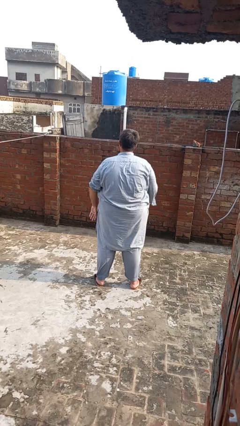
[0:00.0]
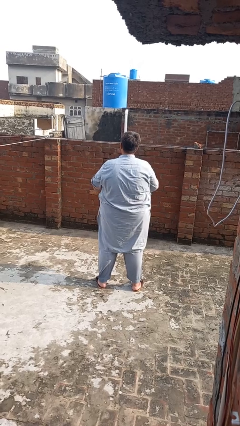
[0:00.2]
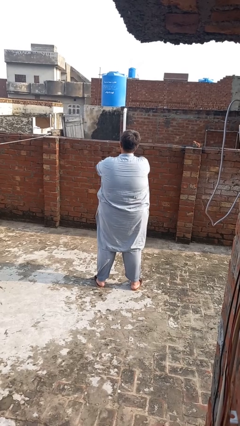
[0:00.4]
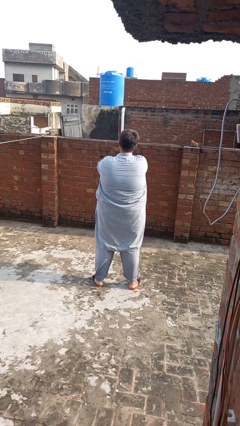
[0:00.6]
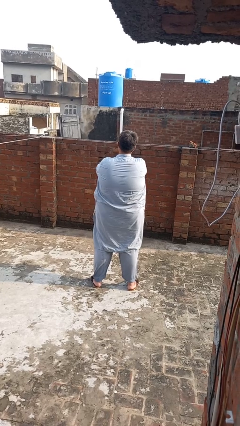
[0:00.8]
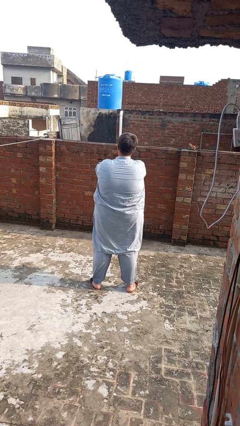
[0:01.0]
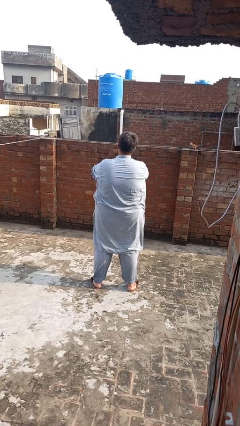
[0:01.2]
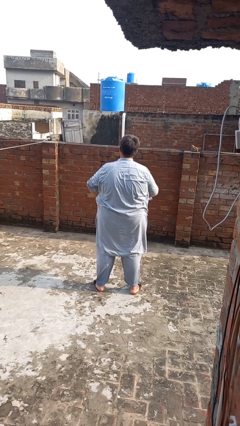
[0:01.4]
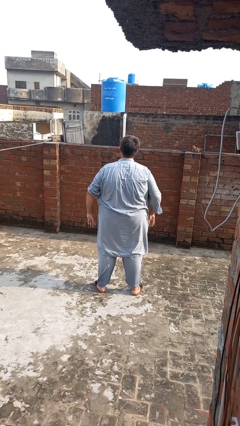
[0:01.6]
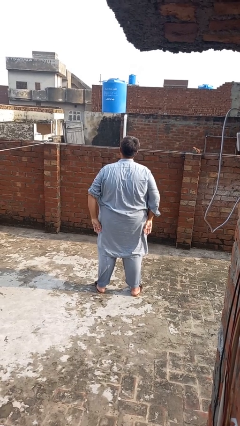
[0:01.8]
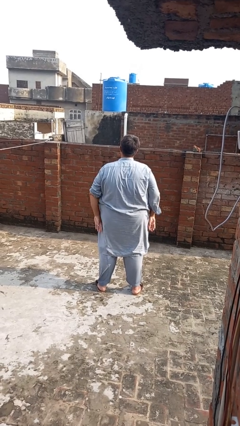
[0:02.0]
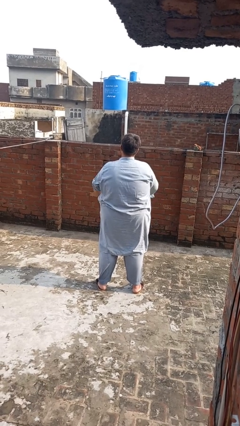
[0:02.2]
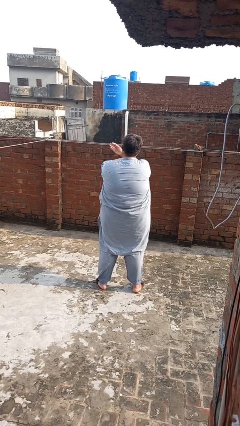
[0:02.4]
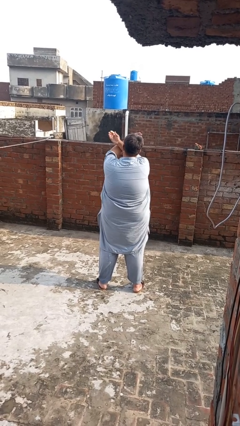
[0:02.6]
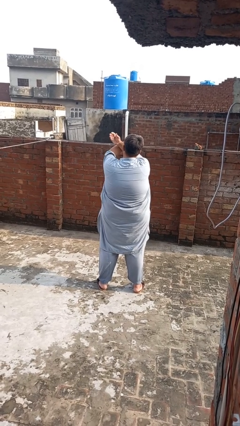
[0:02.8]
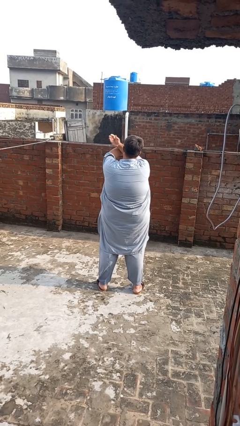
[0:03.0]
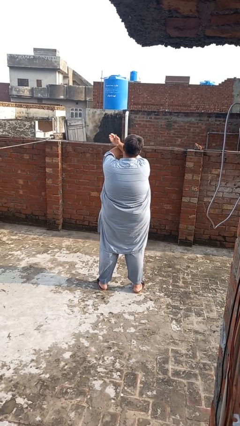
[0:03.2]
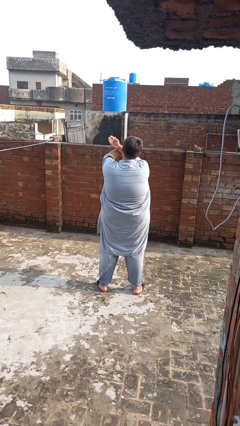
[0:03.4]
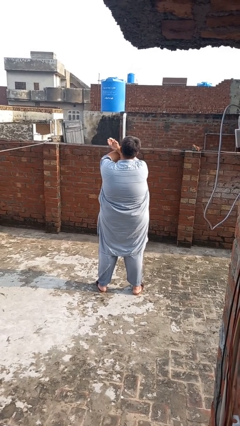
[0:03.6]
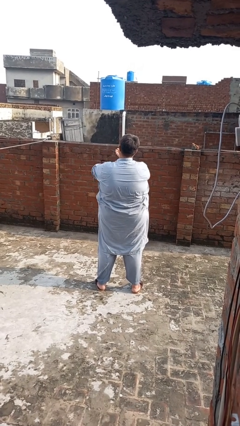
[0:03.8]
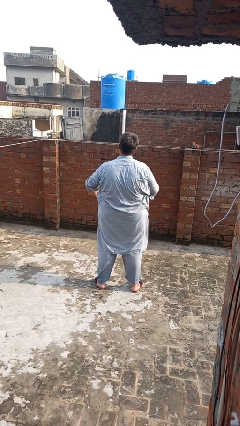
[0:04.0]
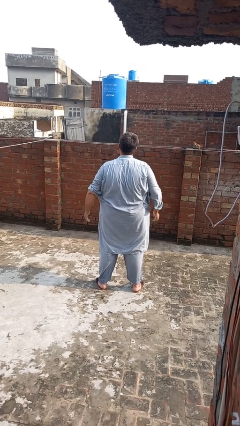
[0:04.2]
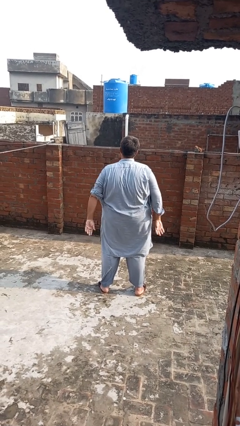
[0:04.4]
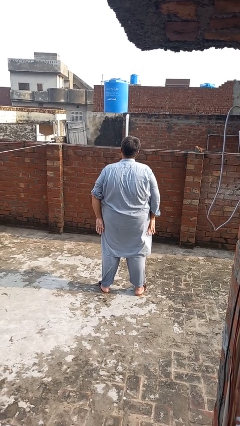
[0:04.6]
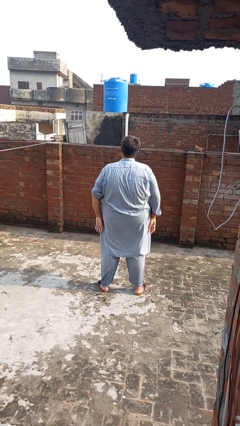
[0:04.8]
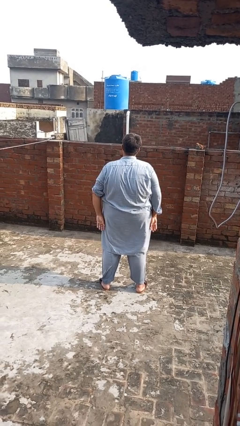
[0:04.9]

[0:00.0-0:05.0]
person gestures arms x

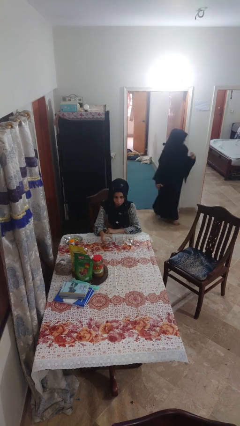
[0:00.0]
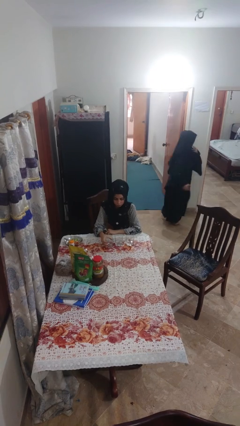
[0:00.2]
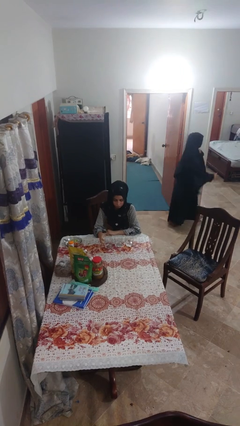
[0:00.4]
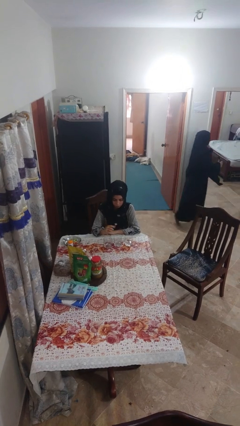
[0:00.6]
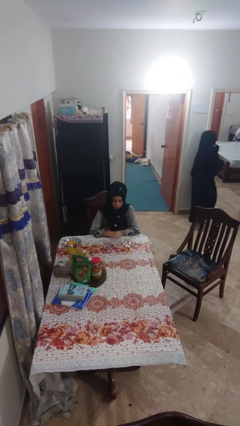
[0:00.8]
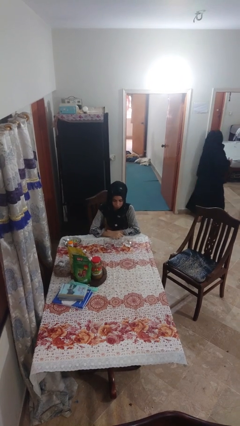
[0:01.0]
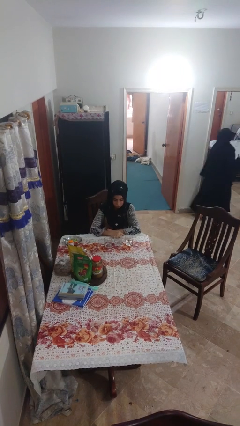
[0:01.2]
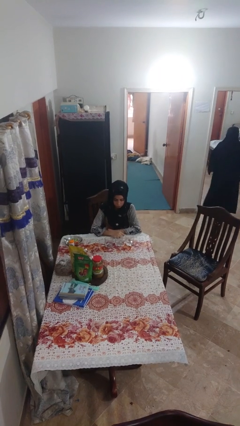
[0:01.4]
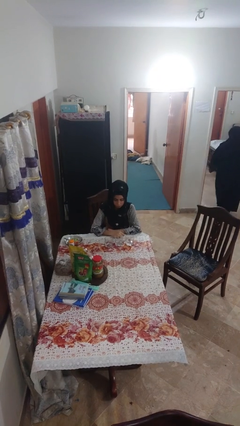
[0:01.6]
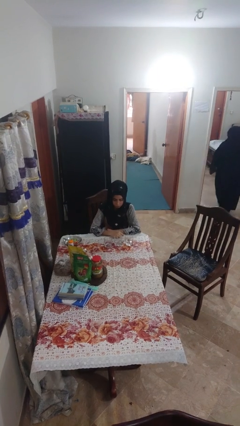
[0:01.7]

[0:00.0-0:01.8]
person puts down object on table

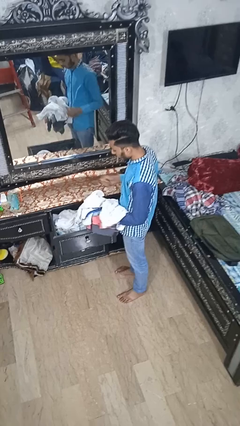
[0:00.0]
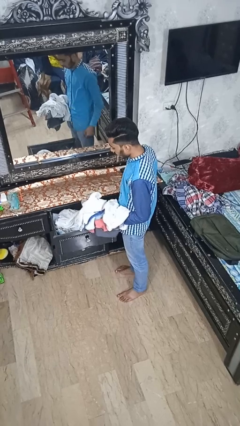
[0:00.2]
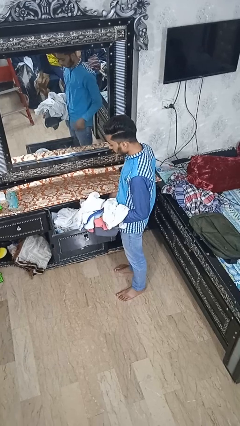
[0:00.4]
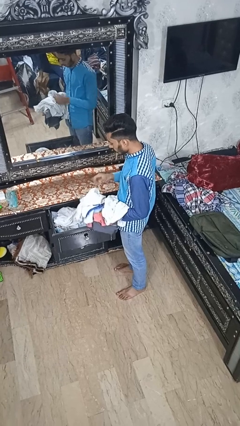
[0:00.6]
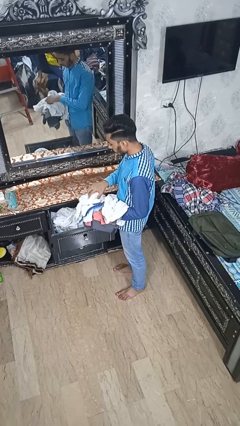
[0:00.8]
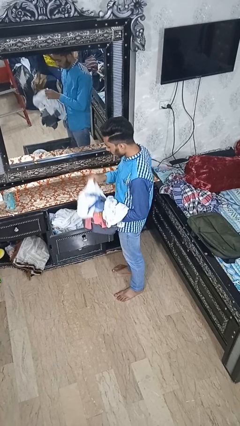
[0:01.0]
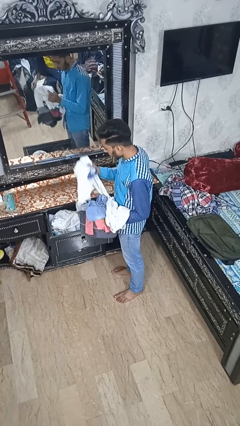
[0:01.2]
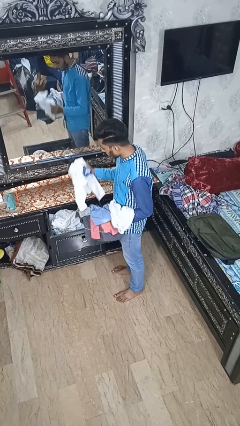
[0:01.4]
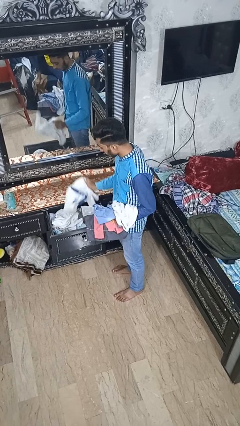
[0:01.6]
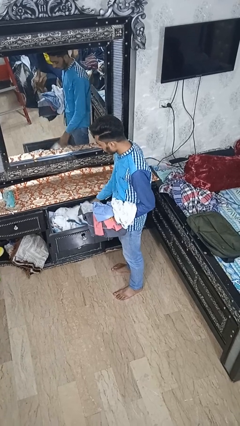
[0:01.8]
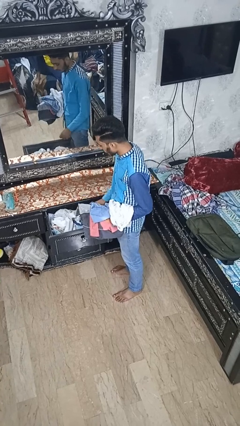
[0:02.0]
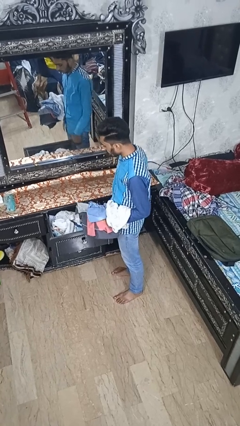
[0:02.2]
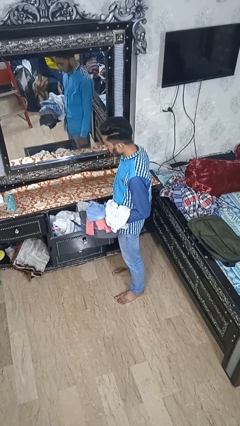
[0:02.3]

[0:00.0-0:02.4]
person puts clothes into dresser

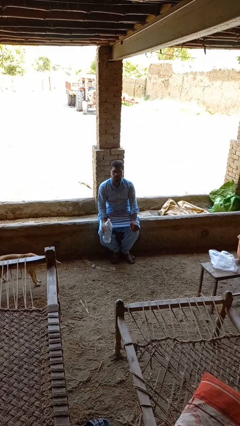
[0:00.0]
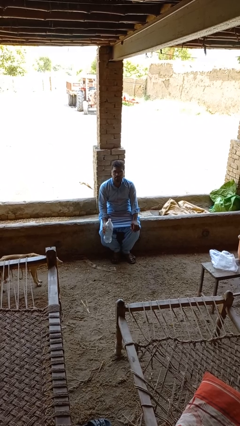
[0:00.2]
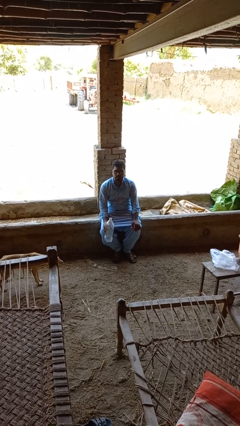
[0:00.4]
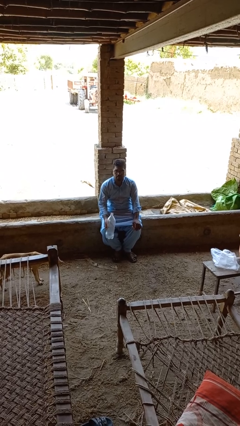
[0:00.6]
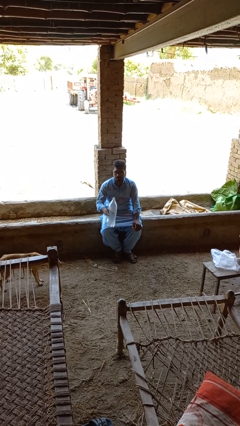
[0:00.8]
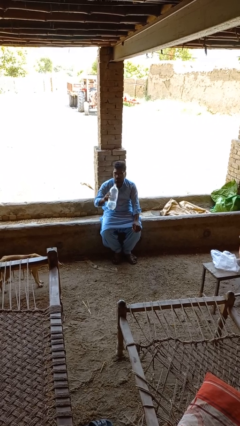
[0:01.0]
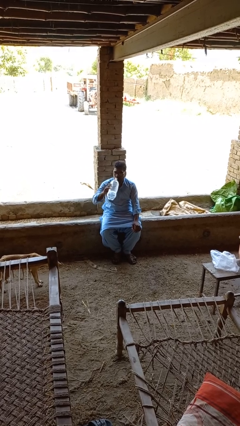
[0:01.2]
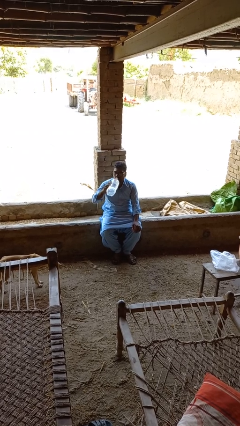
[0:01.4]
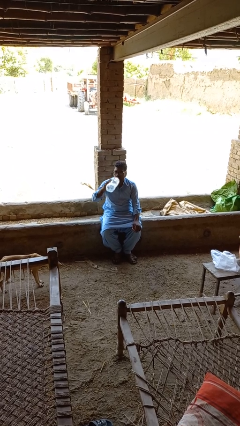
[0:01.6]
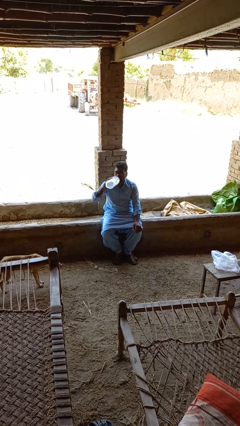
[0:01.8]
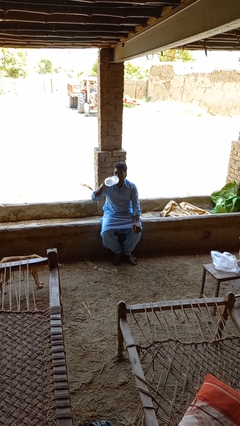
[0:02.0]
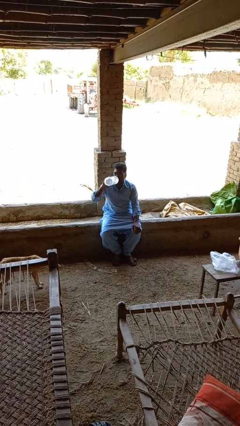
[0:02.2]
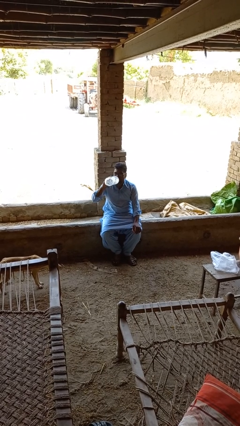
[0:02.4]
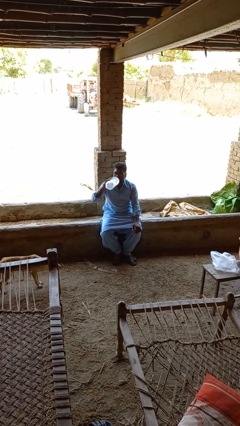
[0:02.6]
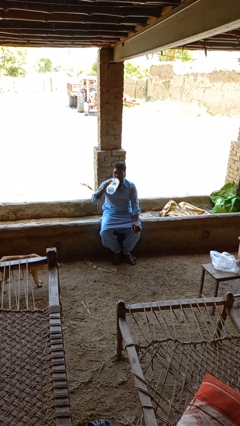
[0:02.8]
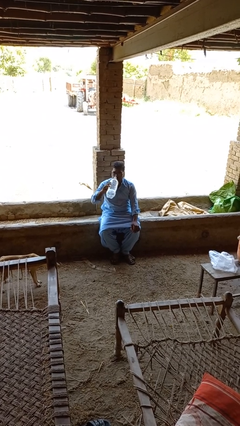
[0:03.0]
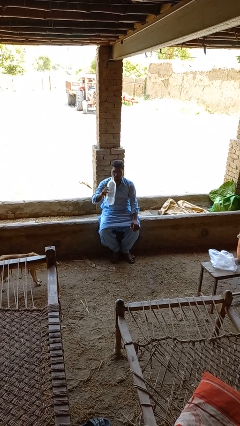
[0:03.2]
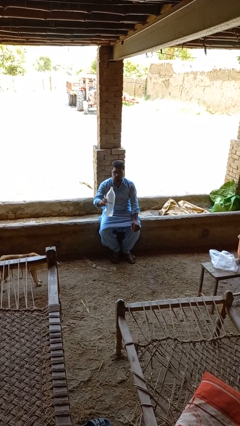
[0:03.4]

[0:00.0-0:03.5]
person drinks from bottle

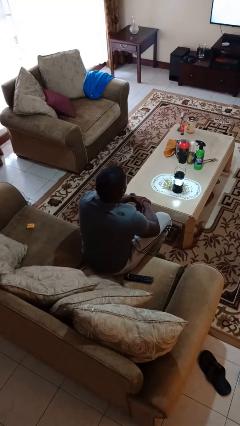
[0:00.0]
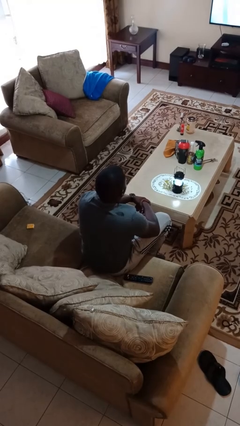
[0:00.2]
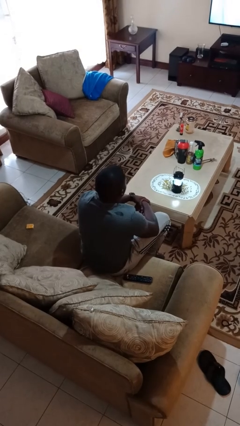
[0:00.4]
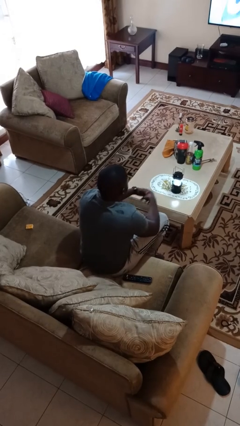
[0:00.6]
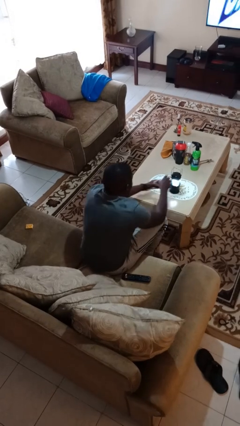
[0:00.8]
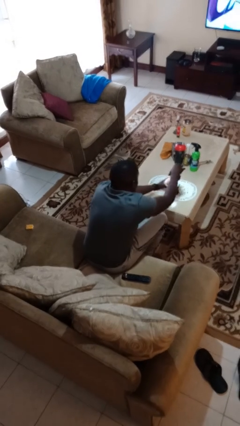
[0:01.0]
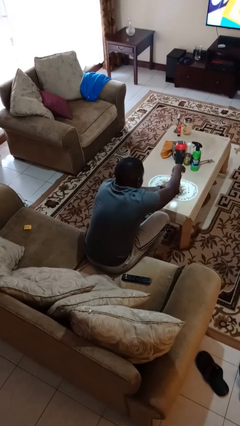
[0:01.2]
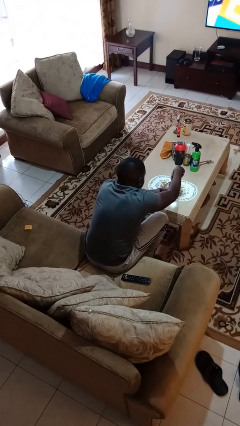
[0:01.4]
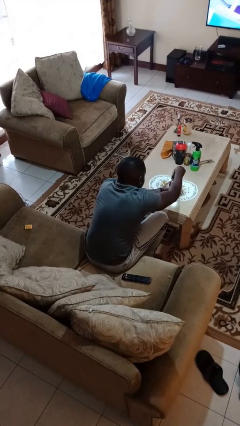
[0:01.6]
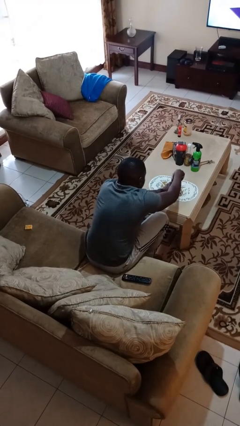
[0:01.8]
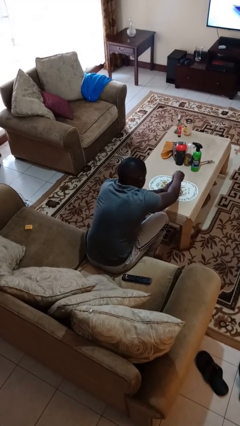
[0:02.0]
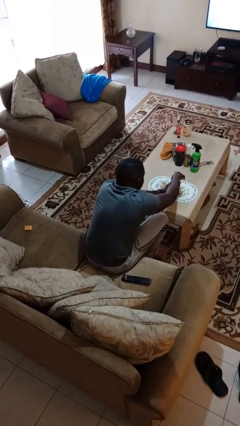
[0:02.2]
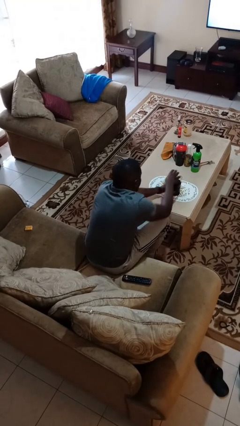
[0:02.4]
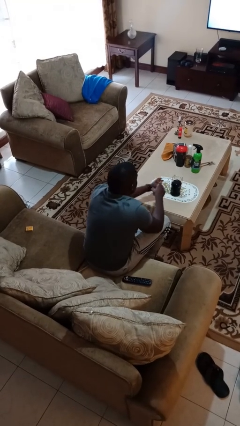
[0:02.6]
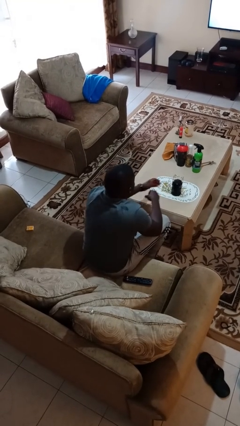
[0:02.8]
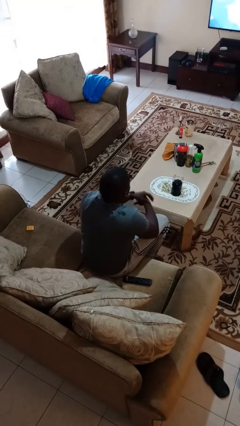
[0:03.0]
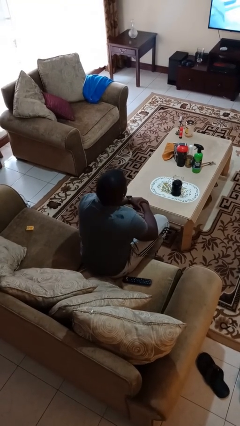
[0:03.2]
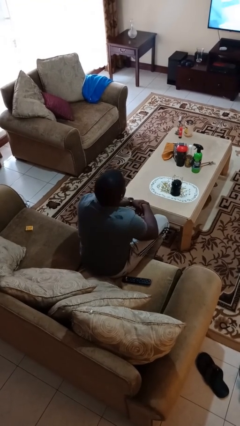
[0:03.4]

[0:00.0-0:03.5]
person turns off lamp

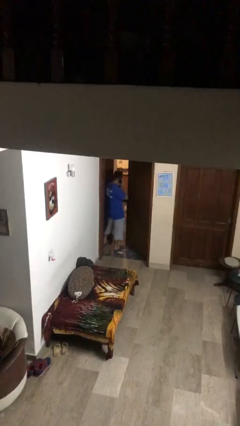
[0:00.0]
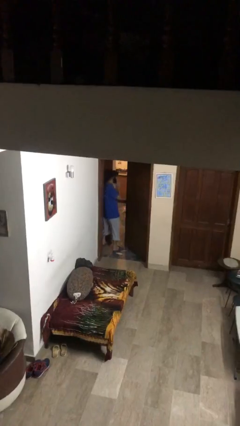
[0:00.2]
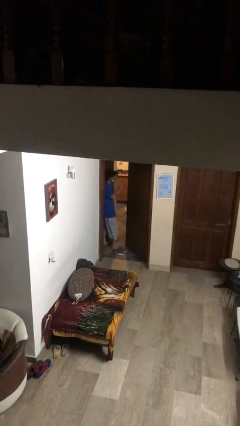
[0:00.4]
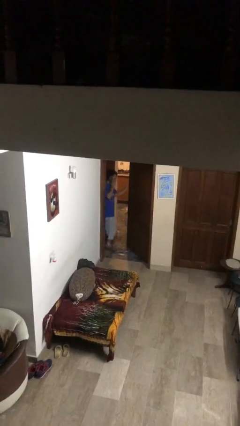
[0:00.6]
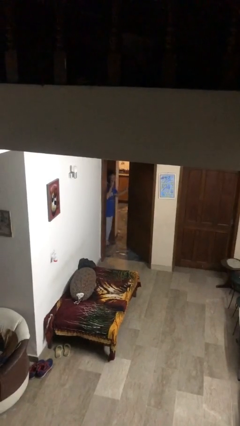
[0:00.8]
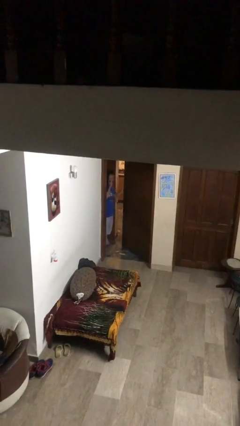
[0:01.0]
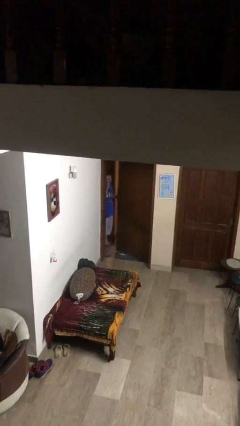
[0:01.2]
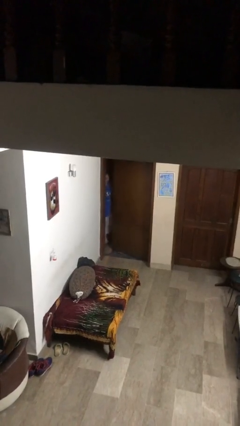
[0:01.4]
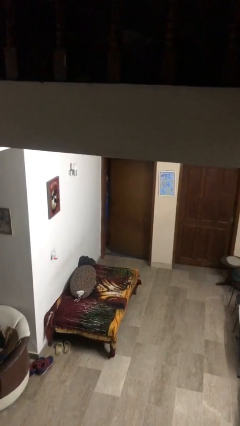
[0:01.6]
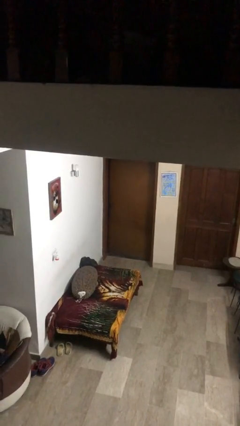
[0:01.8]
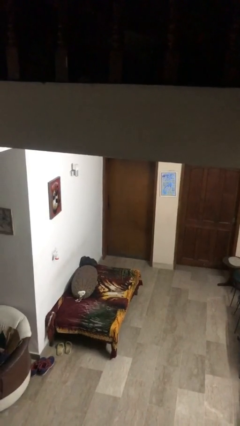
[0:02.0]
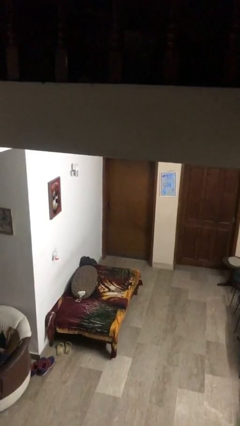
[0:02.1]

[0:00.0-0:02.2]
person closes facility door
